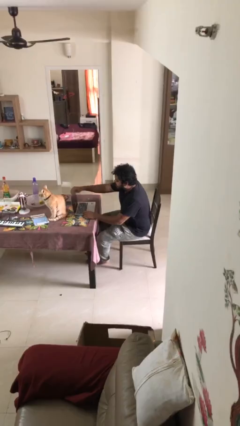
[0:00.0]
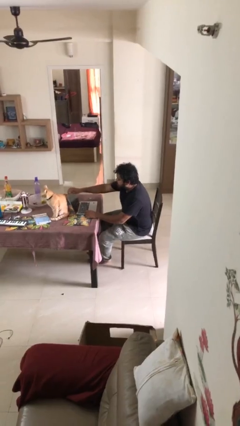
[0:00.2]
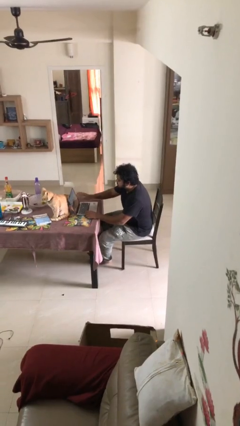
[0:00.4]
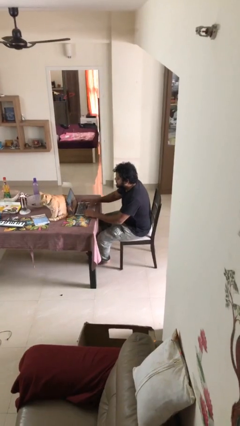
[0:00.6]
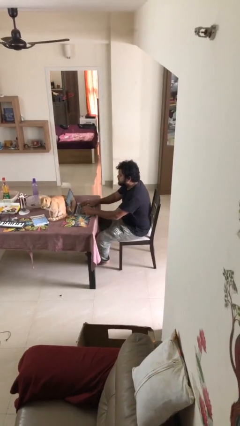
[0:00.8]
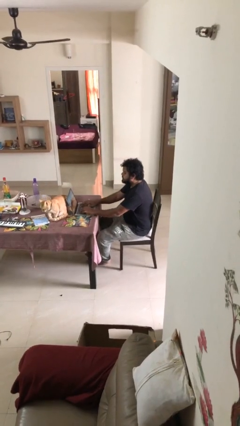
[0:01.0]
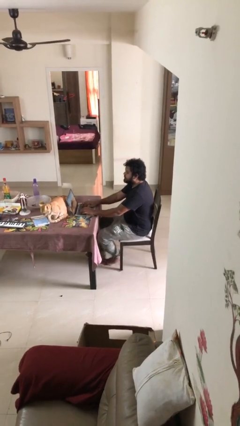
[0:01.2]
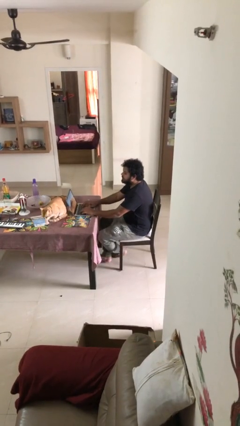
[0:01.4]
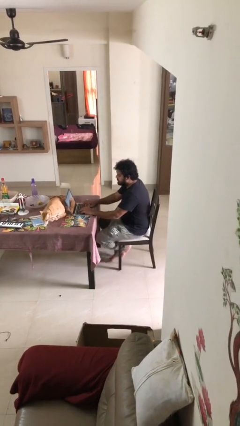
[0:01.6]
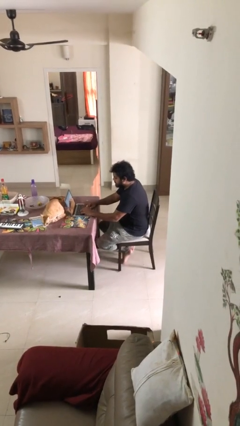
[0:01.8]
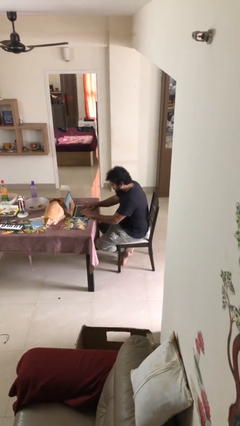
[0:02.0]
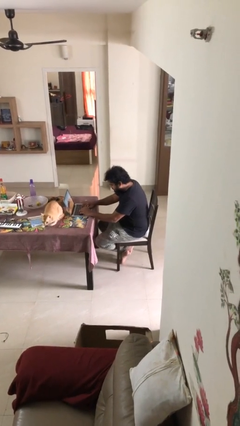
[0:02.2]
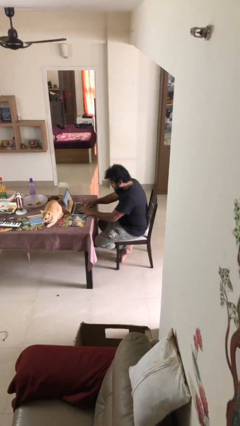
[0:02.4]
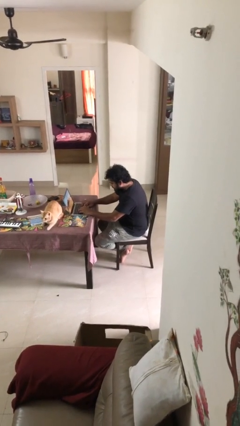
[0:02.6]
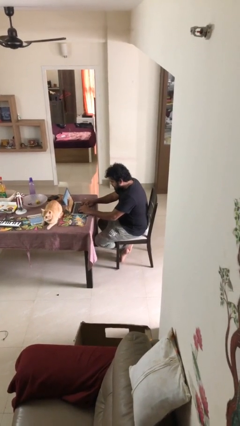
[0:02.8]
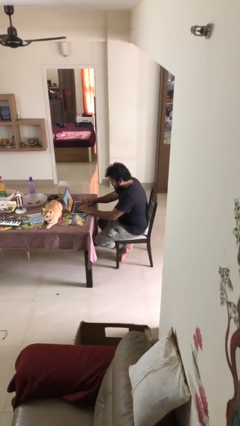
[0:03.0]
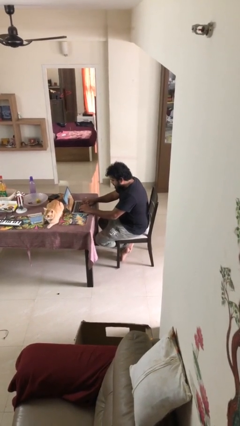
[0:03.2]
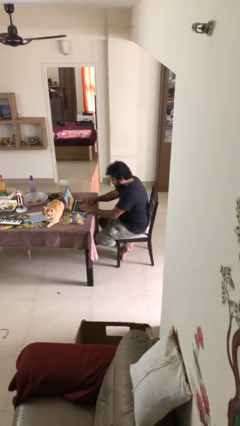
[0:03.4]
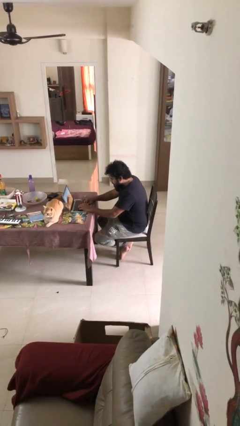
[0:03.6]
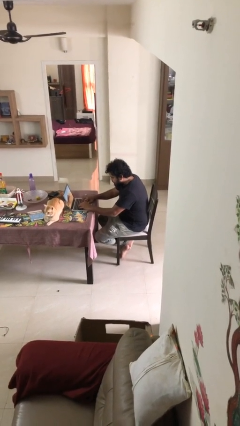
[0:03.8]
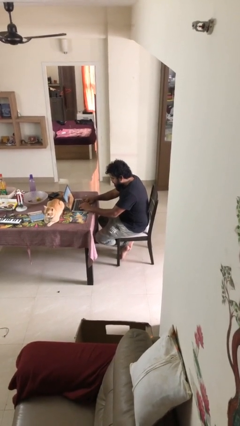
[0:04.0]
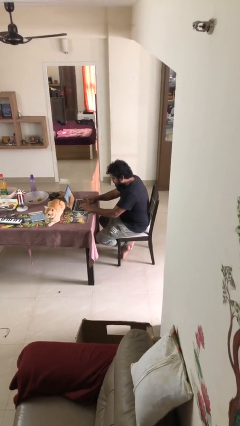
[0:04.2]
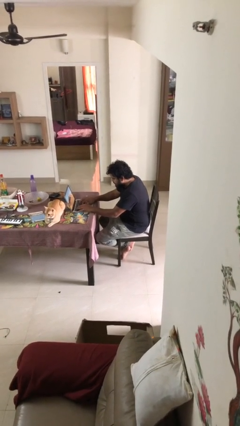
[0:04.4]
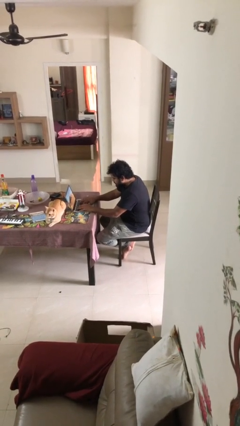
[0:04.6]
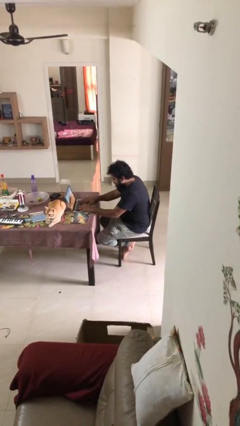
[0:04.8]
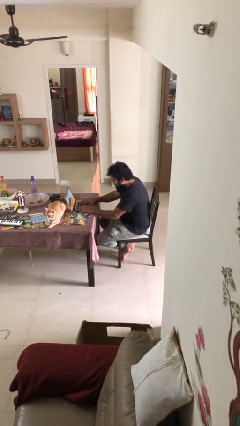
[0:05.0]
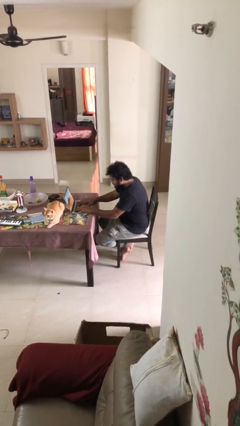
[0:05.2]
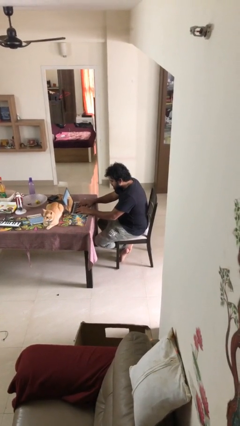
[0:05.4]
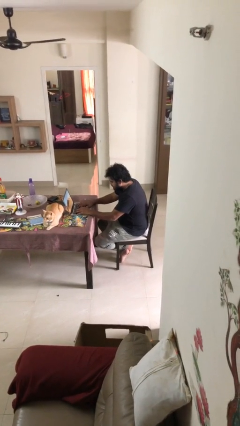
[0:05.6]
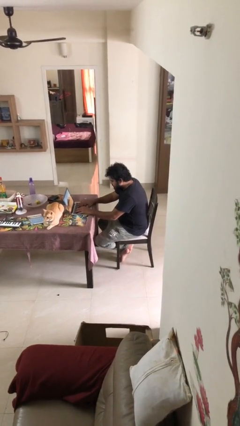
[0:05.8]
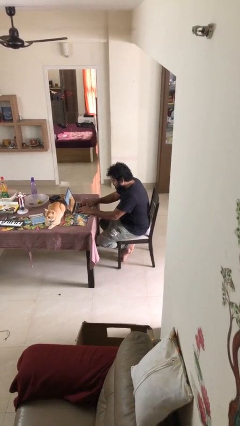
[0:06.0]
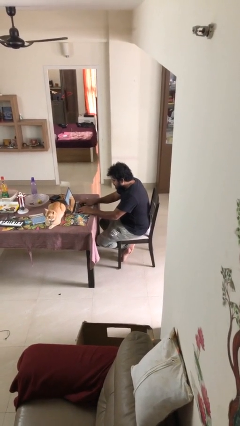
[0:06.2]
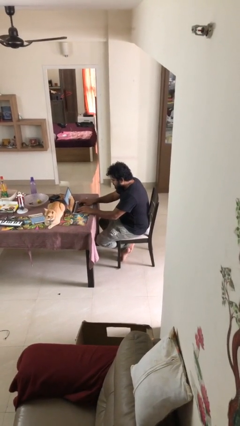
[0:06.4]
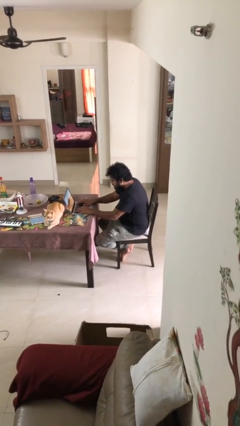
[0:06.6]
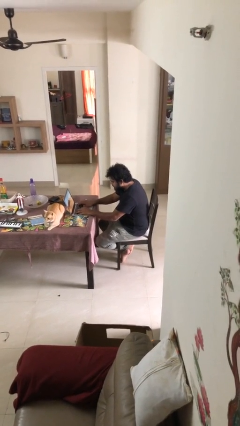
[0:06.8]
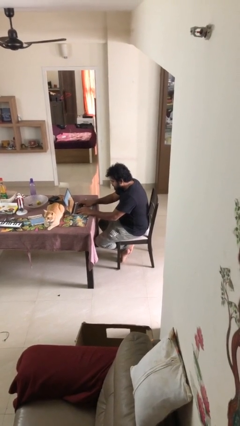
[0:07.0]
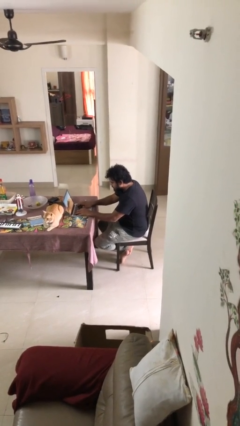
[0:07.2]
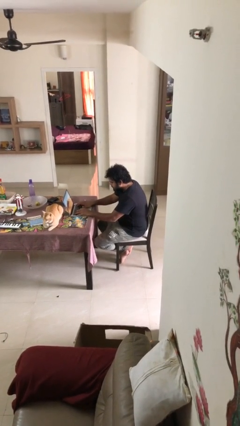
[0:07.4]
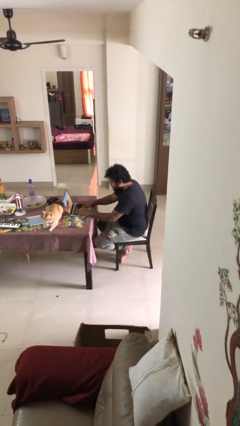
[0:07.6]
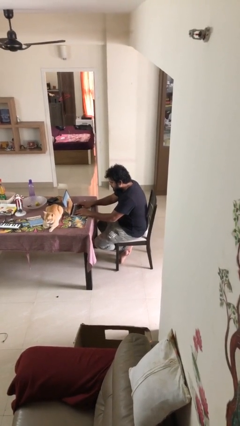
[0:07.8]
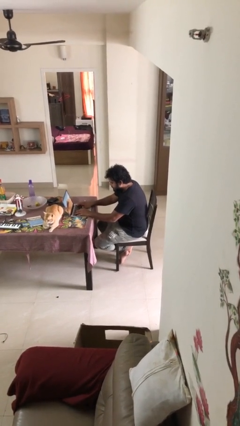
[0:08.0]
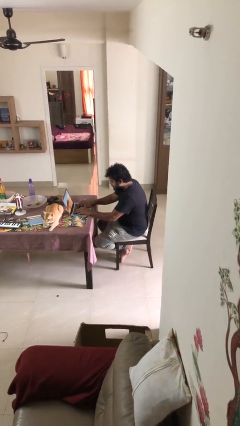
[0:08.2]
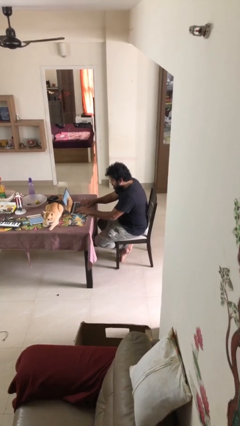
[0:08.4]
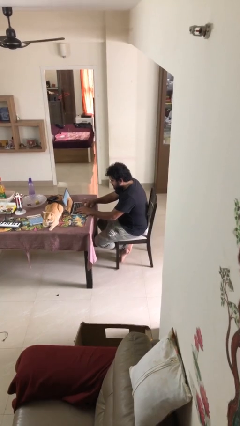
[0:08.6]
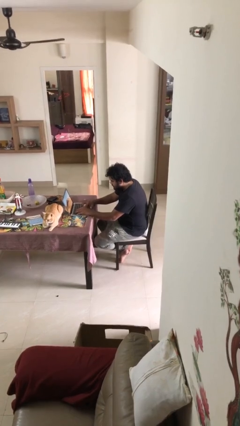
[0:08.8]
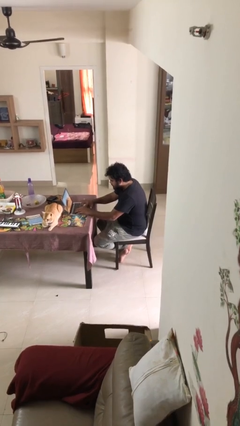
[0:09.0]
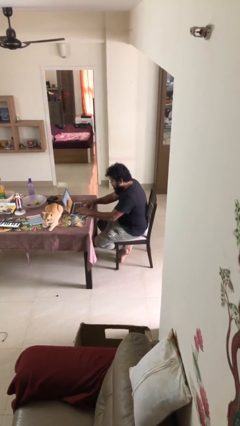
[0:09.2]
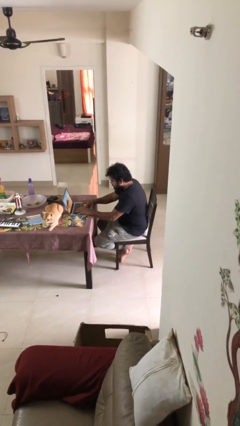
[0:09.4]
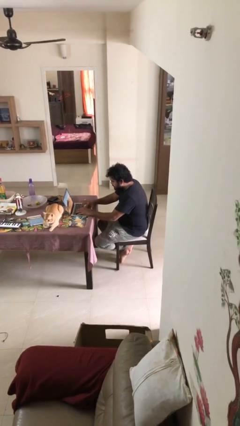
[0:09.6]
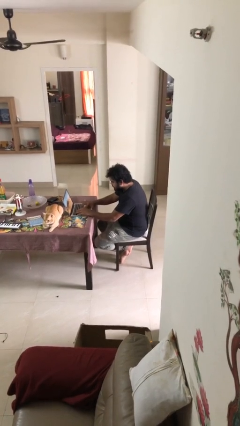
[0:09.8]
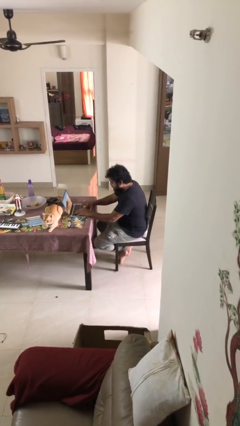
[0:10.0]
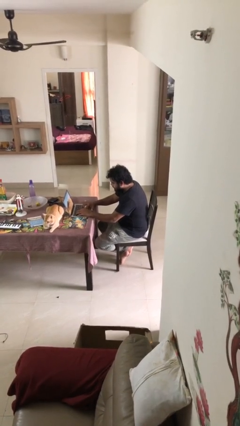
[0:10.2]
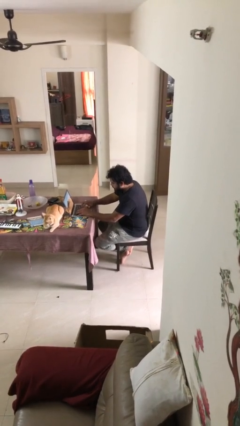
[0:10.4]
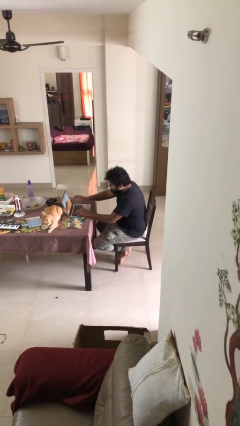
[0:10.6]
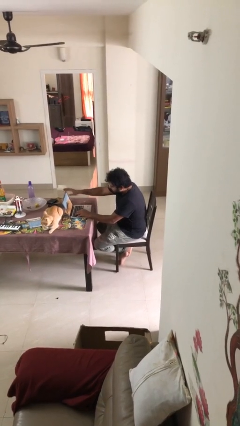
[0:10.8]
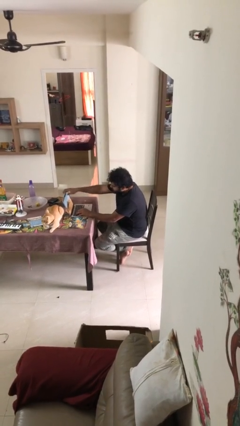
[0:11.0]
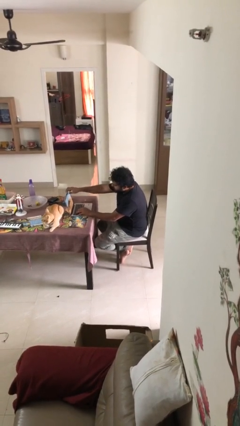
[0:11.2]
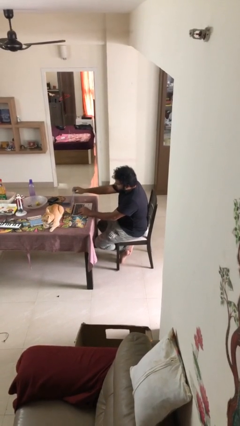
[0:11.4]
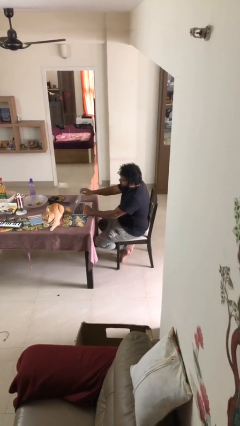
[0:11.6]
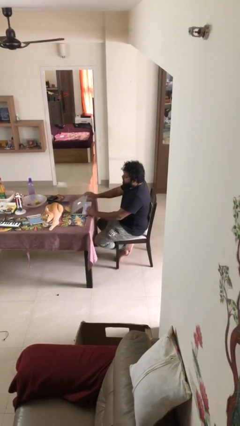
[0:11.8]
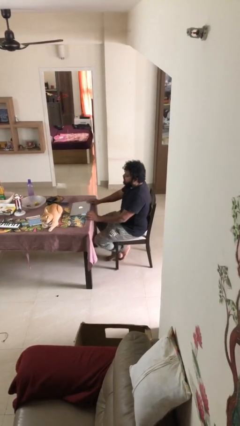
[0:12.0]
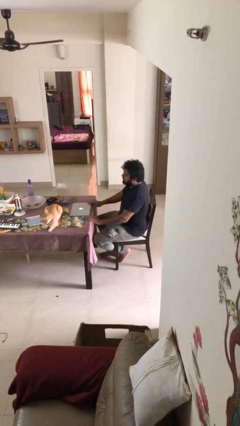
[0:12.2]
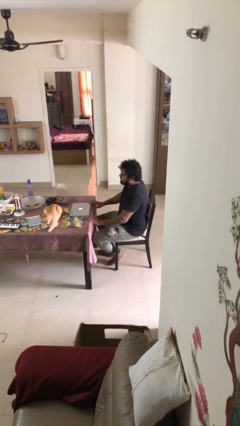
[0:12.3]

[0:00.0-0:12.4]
person interacts with laptop

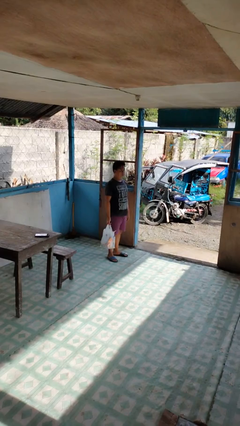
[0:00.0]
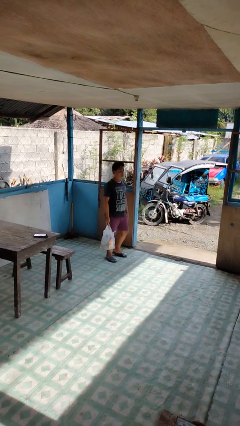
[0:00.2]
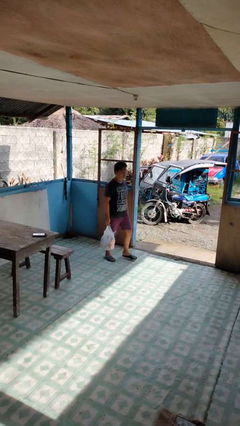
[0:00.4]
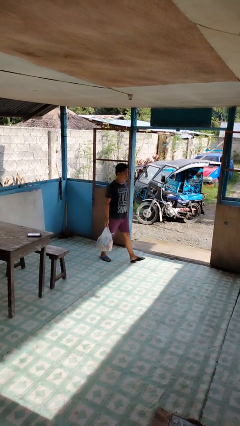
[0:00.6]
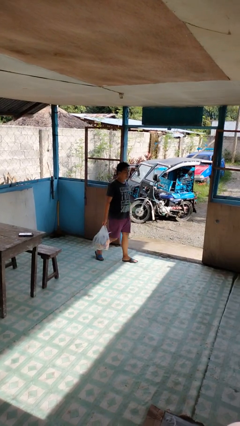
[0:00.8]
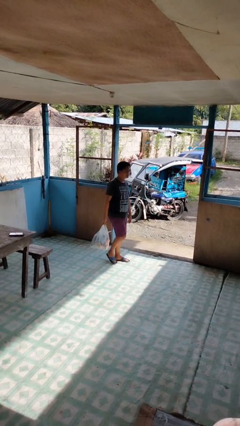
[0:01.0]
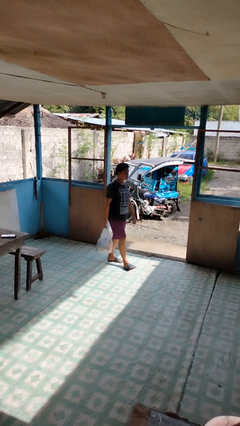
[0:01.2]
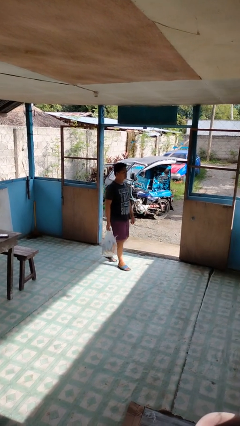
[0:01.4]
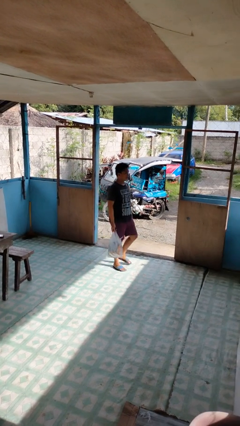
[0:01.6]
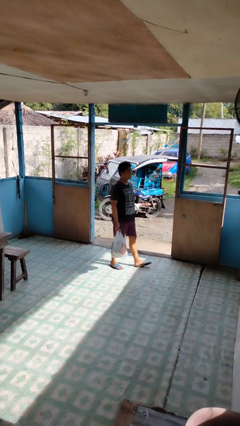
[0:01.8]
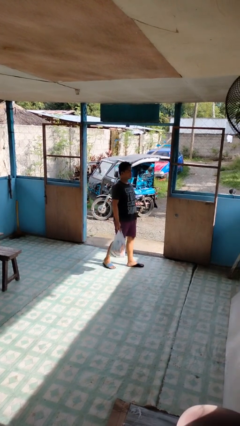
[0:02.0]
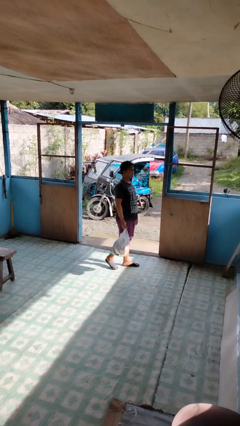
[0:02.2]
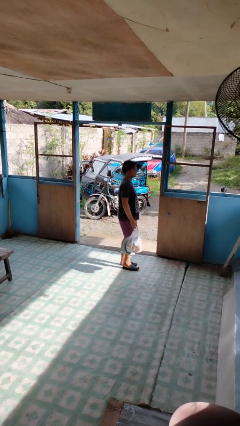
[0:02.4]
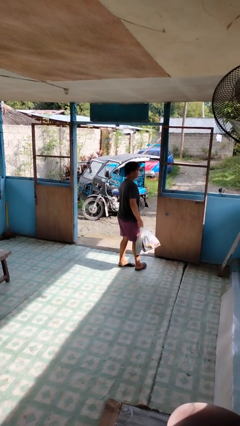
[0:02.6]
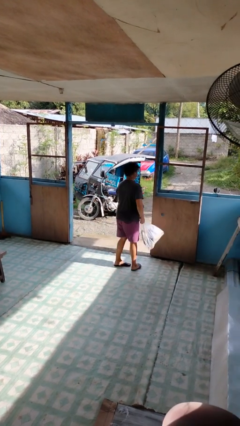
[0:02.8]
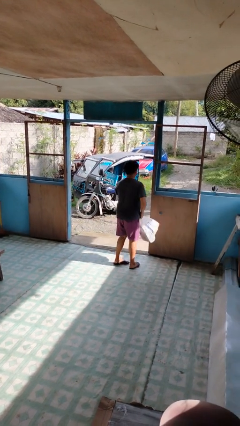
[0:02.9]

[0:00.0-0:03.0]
person carries groceries

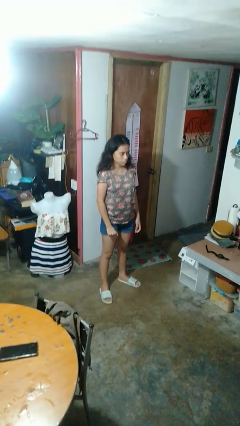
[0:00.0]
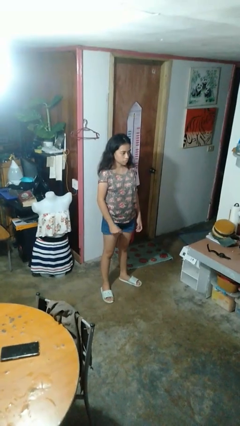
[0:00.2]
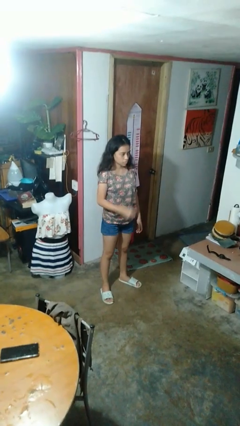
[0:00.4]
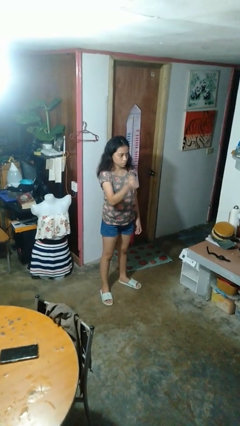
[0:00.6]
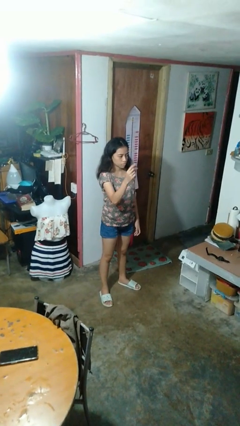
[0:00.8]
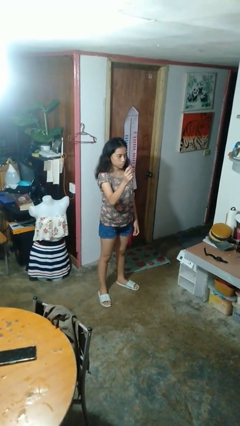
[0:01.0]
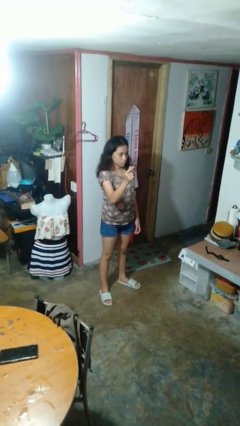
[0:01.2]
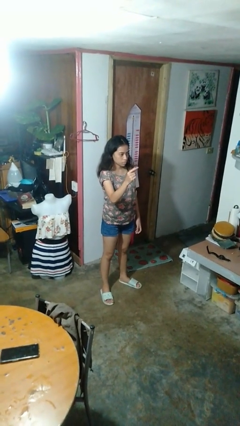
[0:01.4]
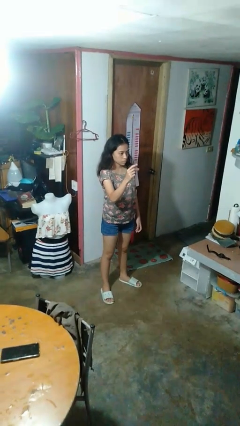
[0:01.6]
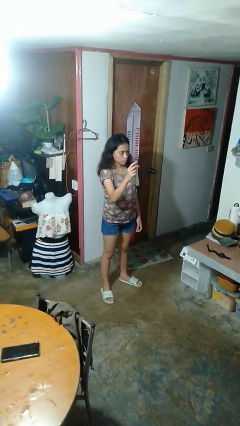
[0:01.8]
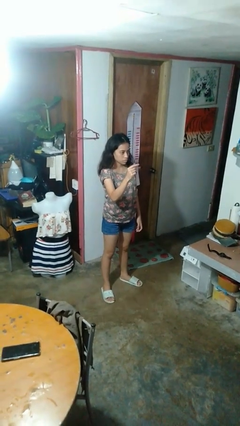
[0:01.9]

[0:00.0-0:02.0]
person snaps fingers

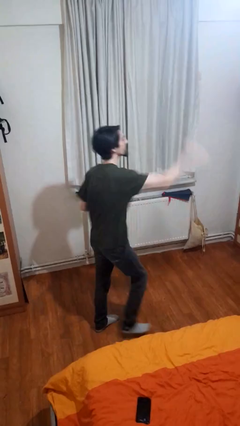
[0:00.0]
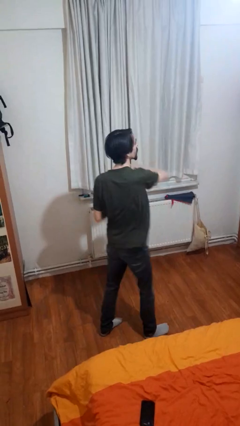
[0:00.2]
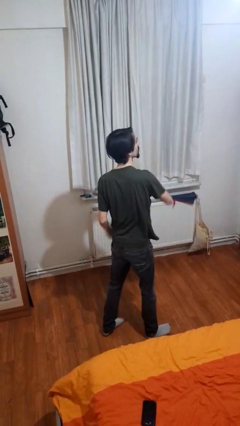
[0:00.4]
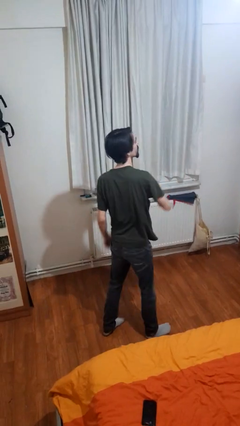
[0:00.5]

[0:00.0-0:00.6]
person punches
